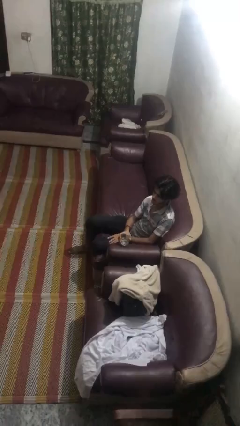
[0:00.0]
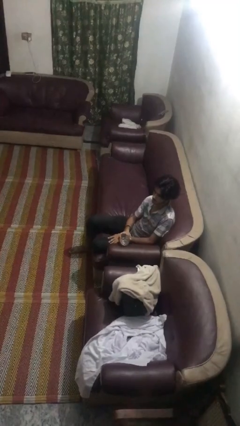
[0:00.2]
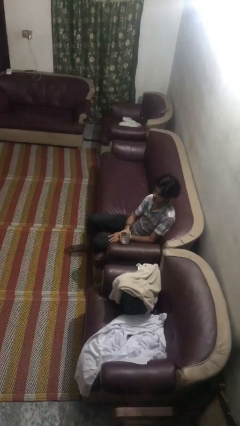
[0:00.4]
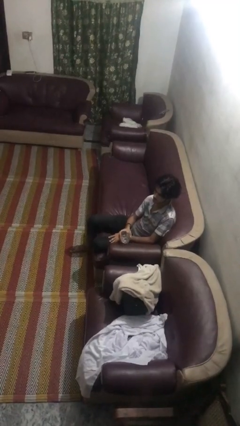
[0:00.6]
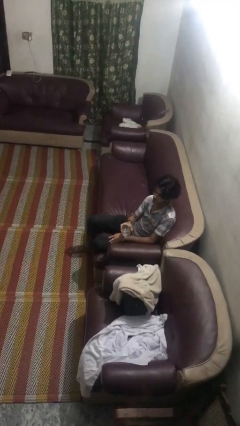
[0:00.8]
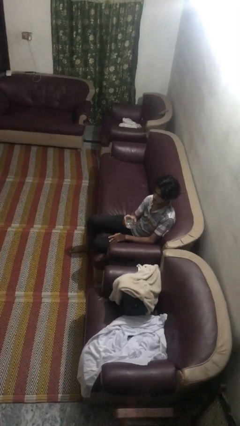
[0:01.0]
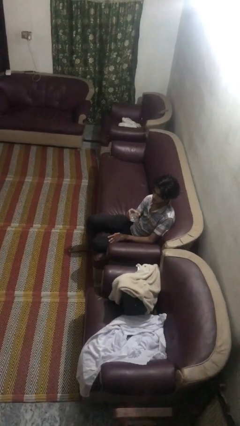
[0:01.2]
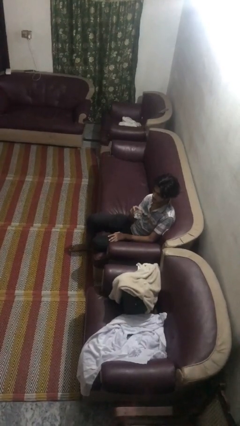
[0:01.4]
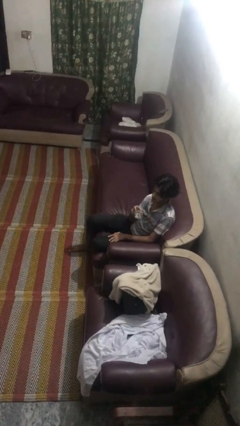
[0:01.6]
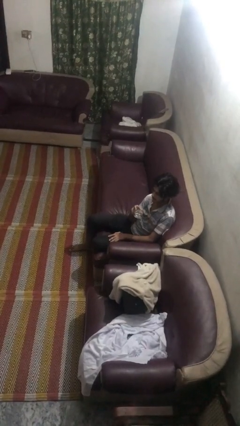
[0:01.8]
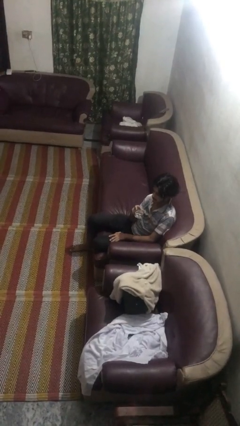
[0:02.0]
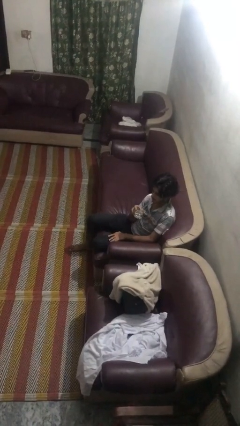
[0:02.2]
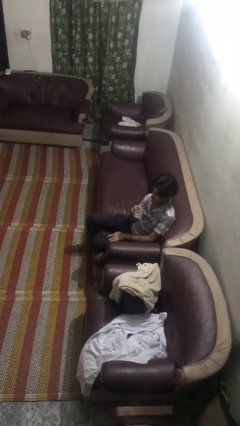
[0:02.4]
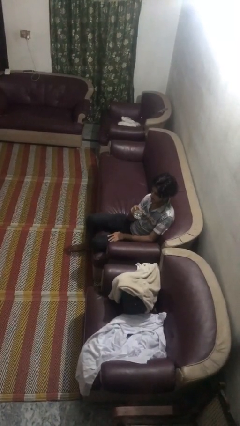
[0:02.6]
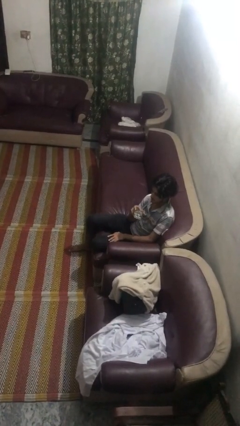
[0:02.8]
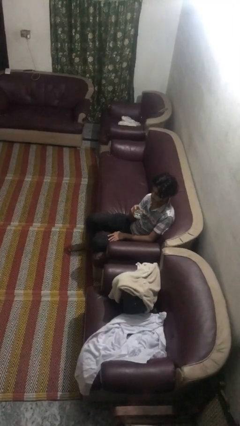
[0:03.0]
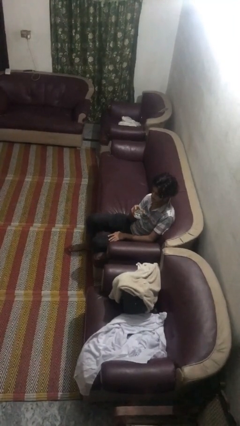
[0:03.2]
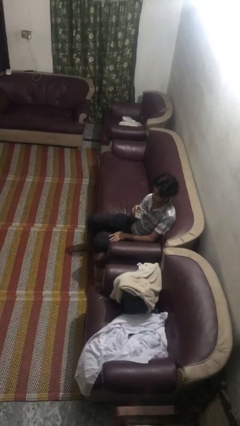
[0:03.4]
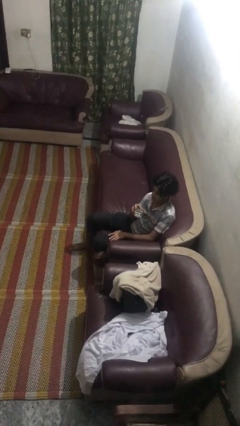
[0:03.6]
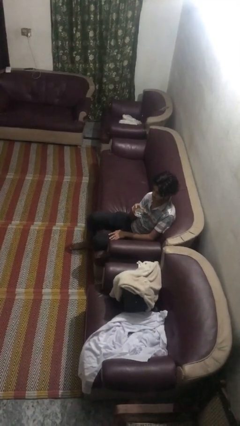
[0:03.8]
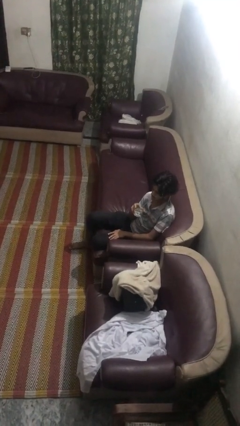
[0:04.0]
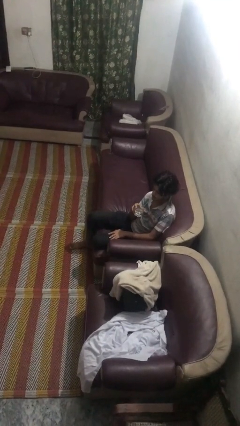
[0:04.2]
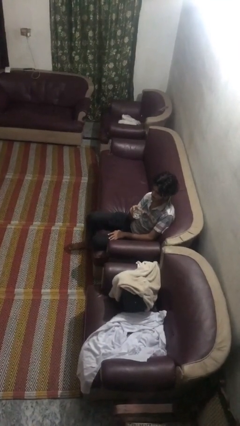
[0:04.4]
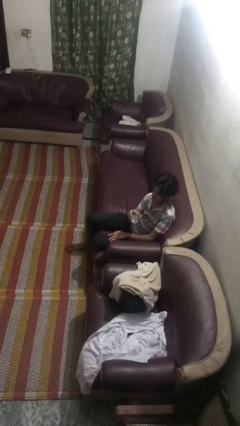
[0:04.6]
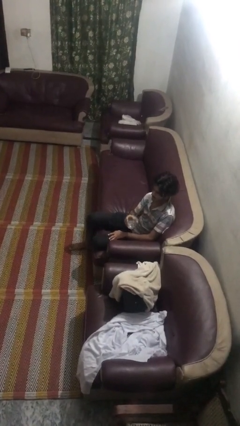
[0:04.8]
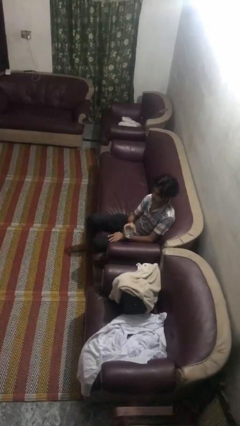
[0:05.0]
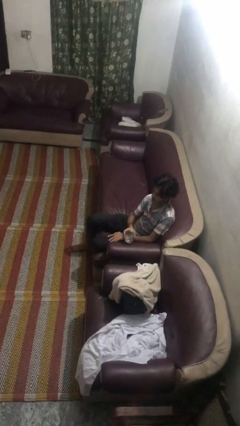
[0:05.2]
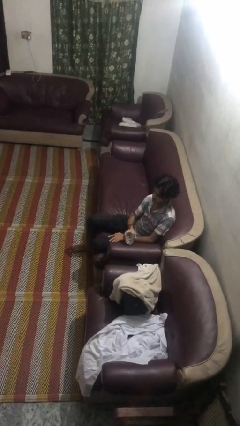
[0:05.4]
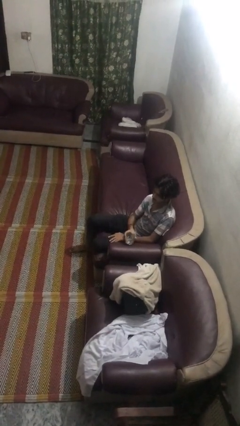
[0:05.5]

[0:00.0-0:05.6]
person drinks from straw

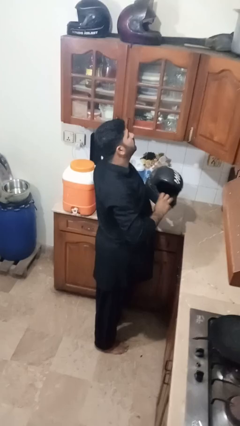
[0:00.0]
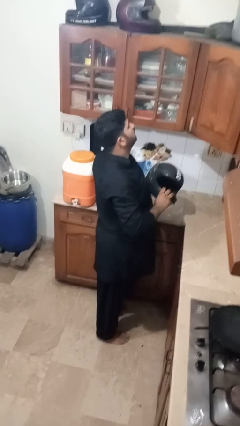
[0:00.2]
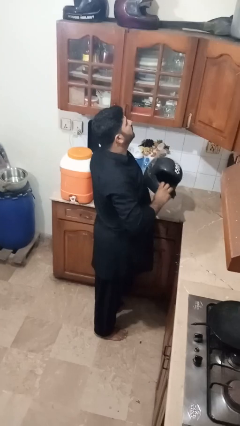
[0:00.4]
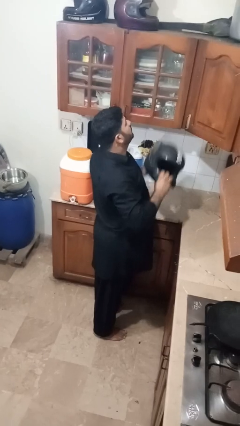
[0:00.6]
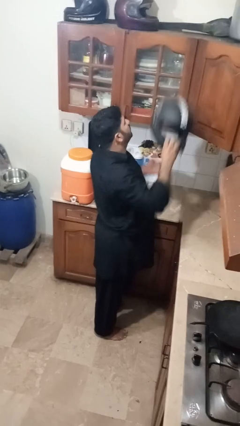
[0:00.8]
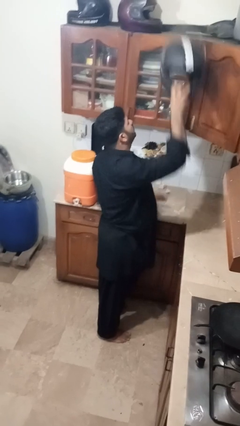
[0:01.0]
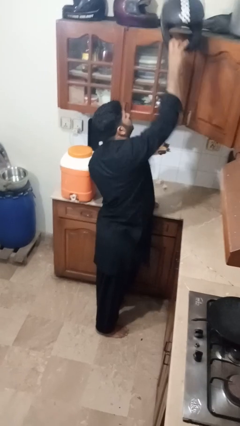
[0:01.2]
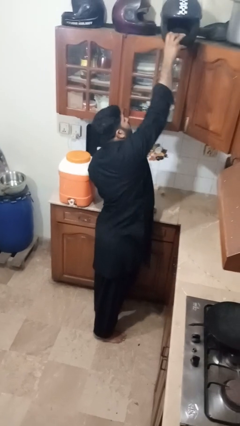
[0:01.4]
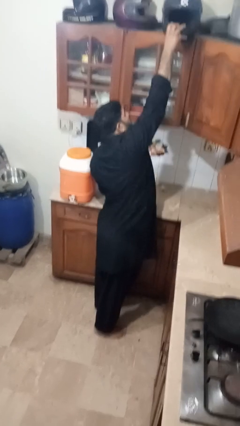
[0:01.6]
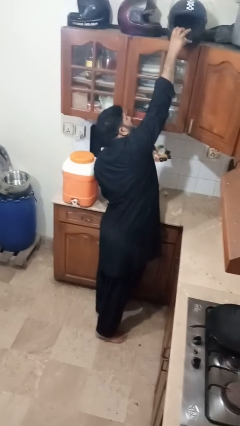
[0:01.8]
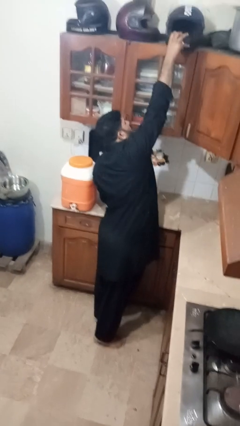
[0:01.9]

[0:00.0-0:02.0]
person puts down object on shelf

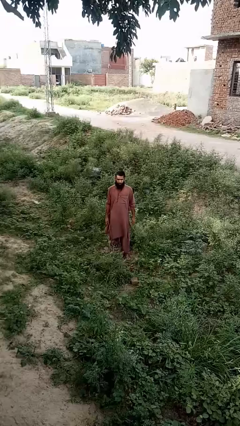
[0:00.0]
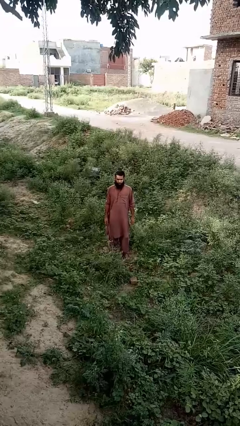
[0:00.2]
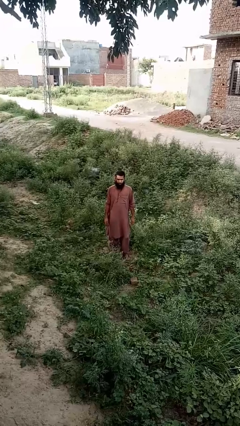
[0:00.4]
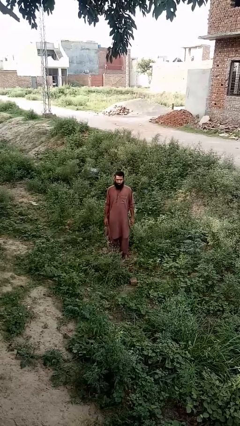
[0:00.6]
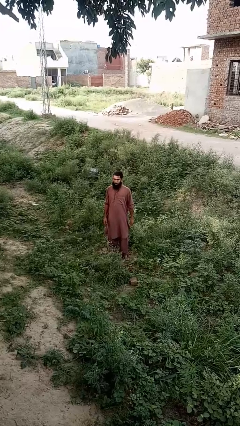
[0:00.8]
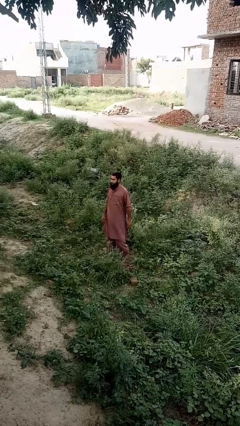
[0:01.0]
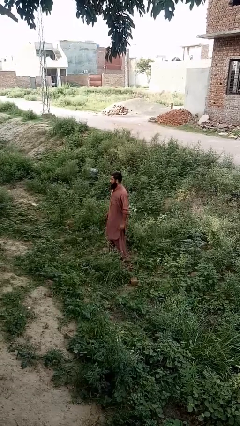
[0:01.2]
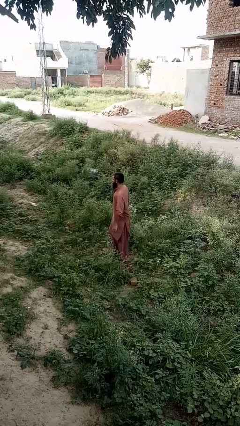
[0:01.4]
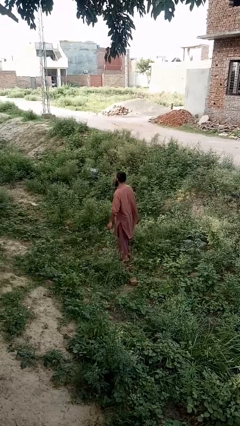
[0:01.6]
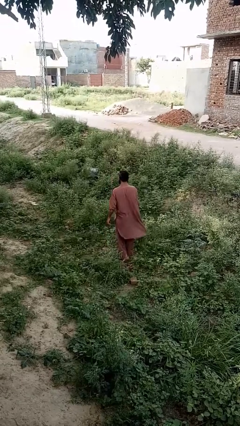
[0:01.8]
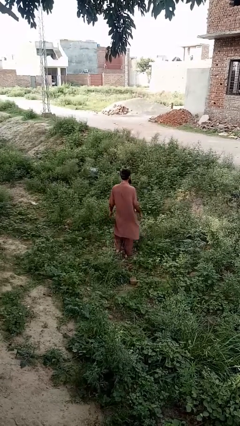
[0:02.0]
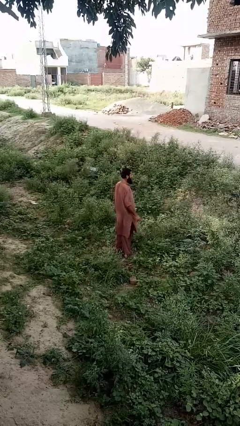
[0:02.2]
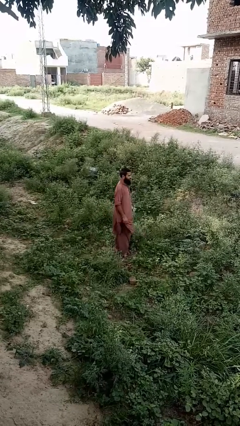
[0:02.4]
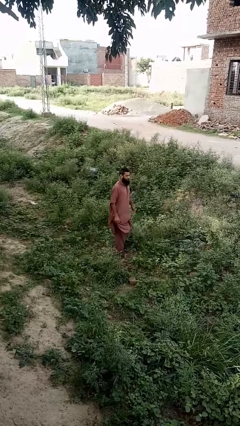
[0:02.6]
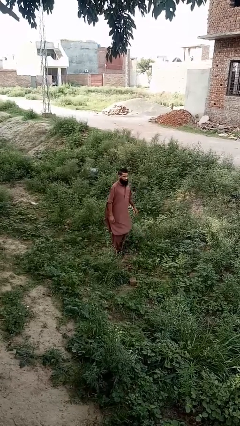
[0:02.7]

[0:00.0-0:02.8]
person twirls

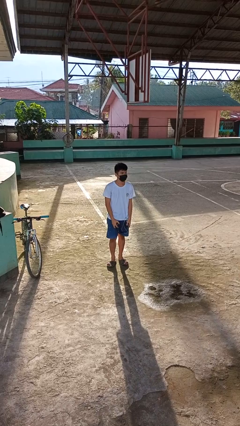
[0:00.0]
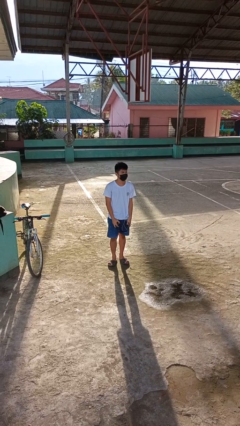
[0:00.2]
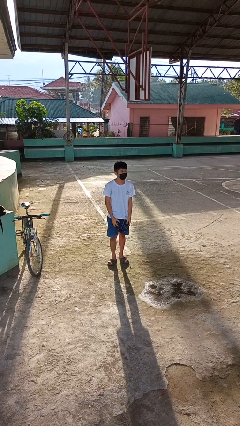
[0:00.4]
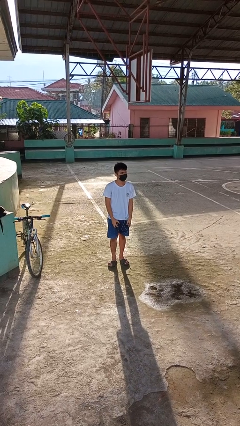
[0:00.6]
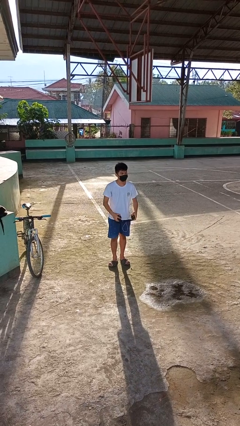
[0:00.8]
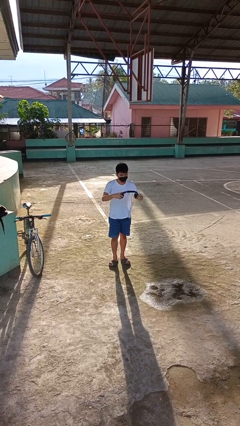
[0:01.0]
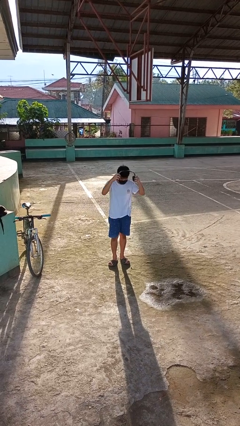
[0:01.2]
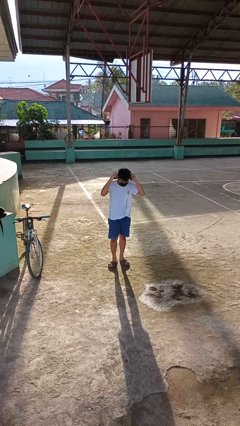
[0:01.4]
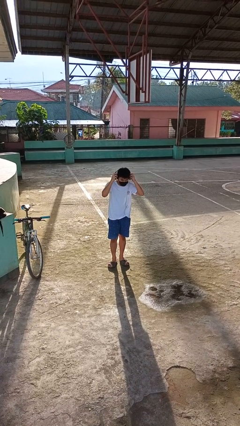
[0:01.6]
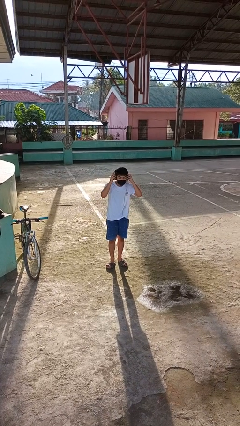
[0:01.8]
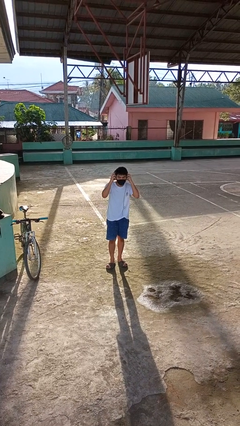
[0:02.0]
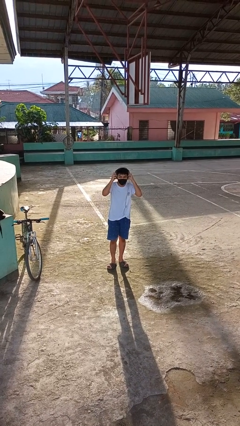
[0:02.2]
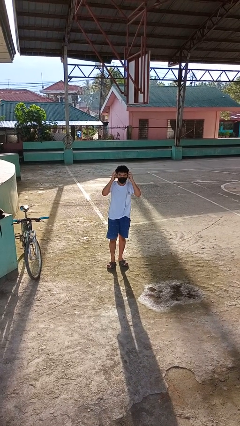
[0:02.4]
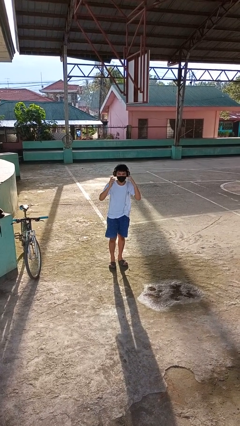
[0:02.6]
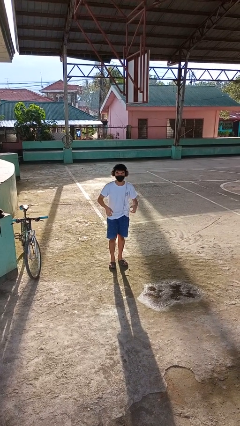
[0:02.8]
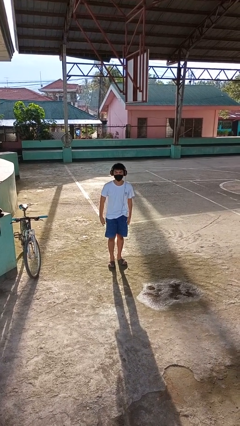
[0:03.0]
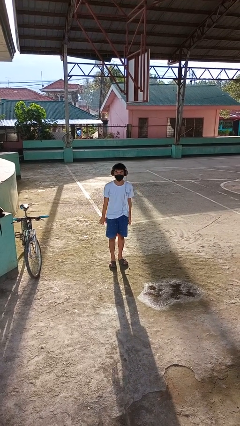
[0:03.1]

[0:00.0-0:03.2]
person puts on headphones

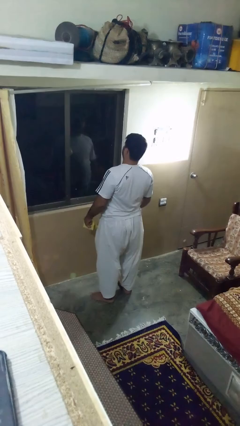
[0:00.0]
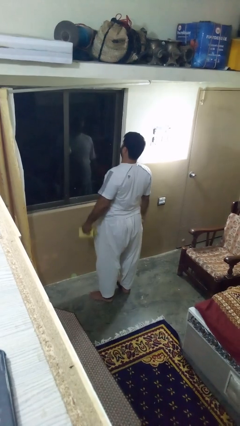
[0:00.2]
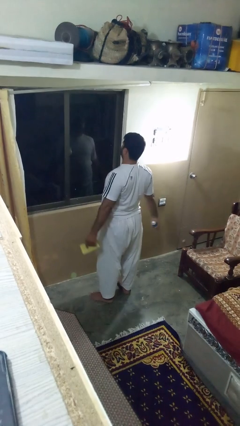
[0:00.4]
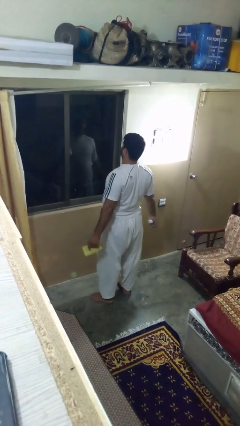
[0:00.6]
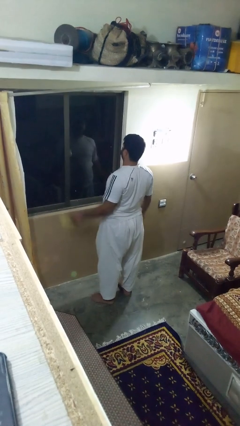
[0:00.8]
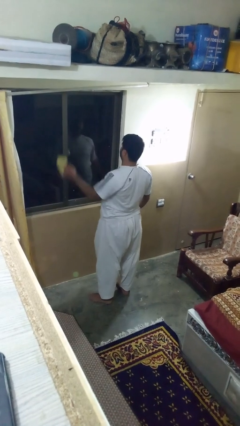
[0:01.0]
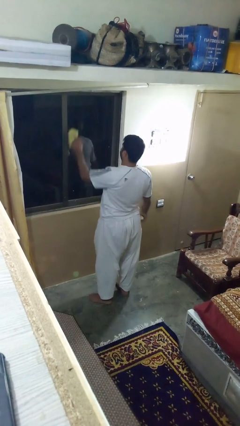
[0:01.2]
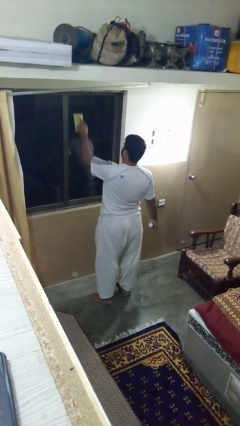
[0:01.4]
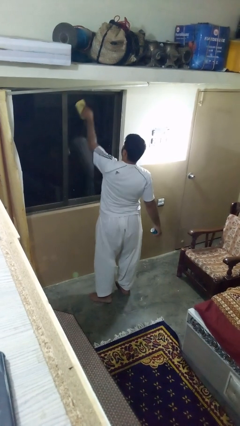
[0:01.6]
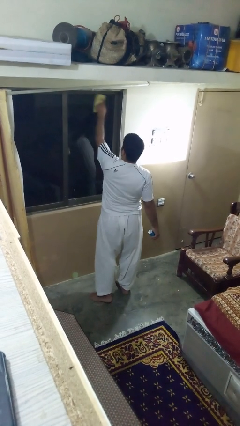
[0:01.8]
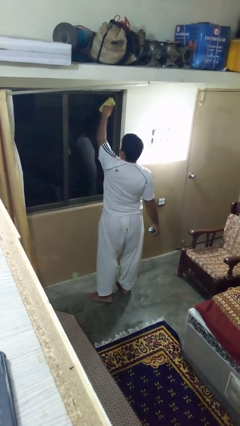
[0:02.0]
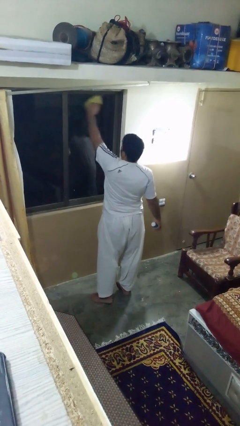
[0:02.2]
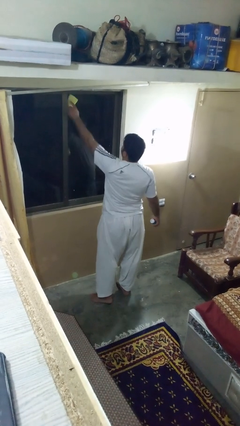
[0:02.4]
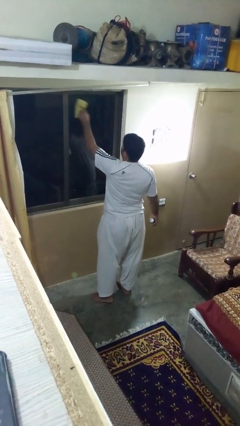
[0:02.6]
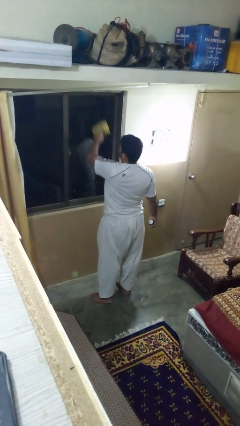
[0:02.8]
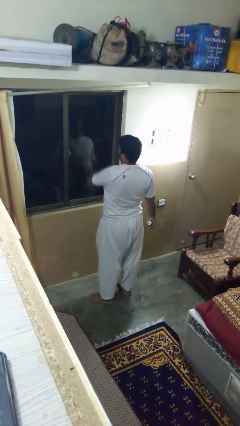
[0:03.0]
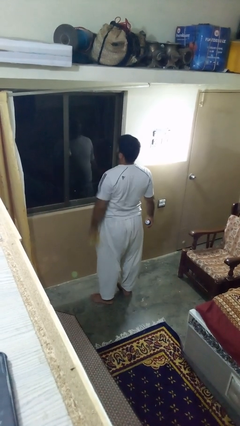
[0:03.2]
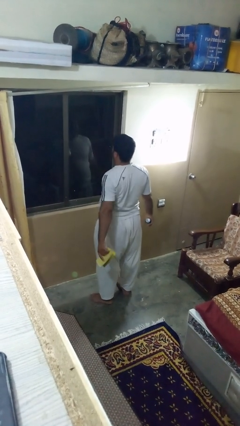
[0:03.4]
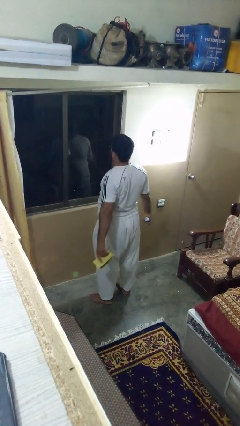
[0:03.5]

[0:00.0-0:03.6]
person washes window
